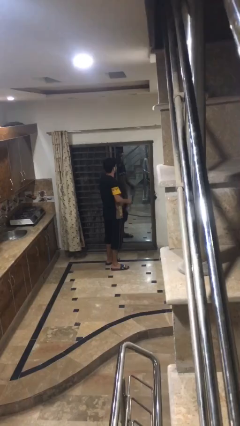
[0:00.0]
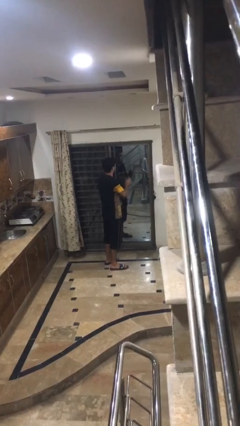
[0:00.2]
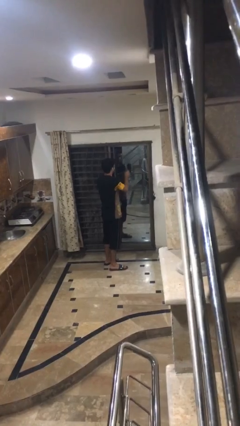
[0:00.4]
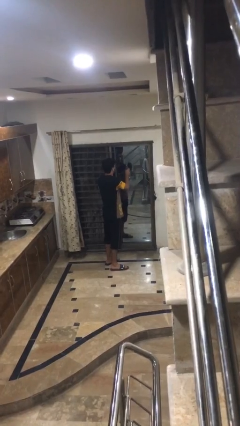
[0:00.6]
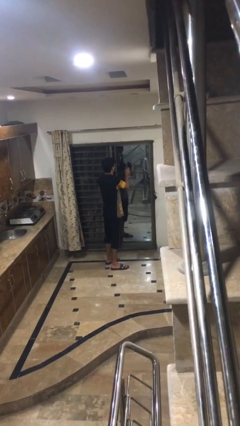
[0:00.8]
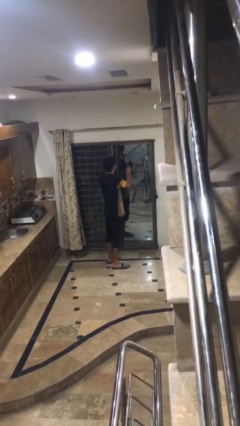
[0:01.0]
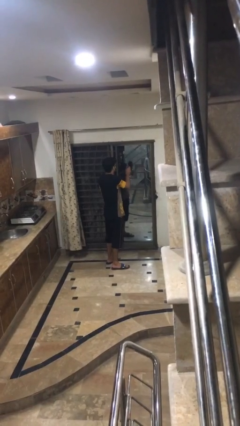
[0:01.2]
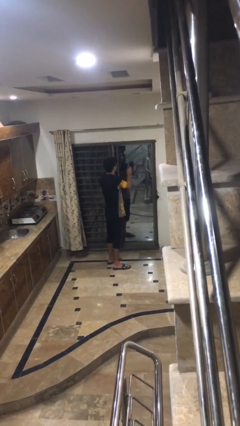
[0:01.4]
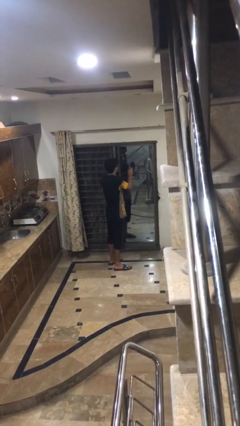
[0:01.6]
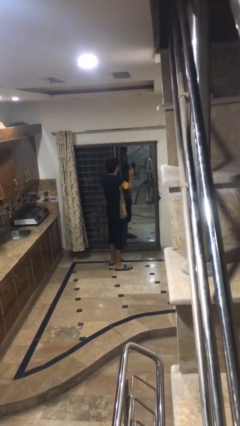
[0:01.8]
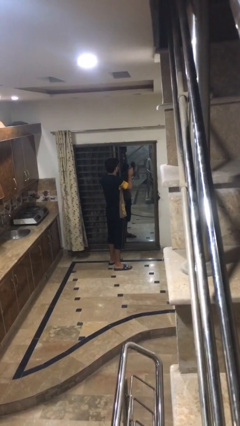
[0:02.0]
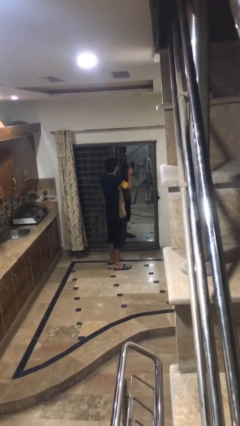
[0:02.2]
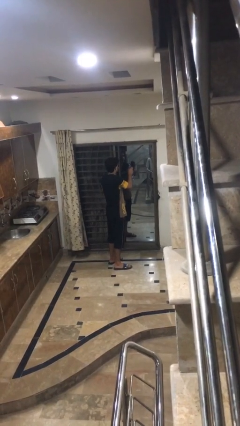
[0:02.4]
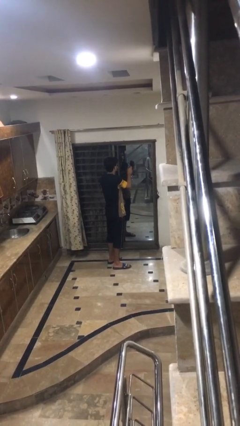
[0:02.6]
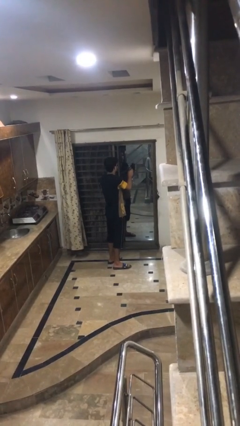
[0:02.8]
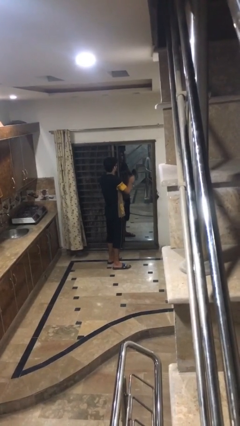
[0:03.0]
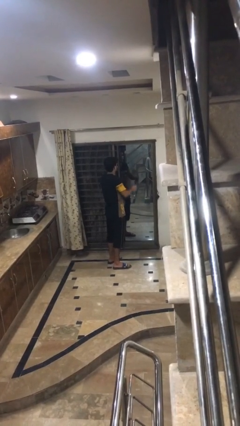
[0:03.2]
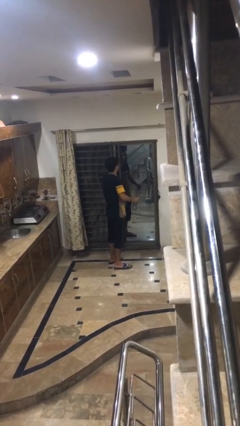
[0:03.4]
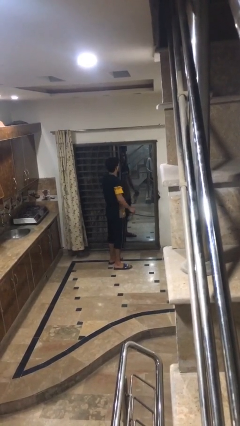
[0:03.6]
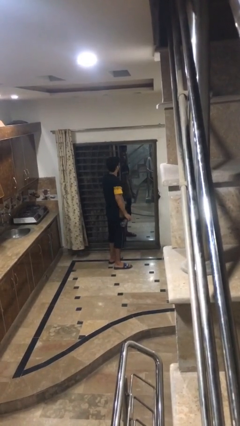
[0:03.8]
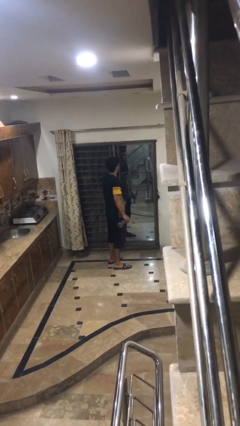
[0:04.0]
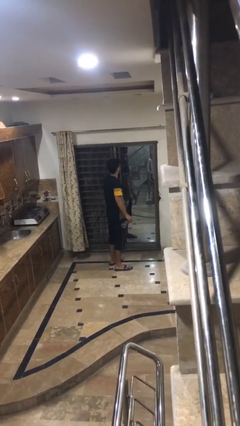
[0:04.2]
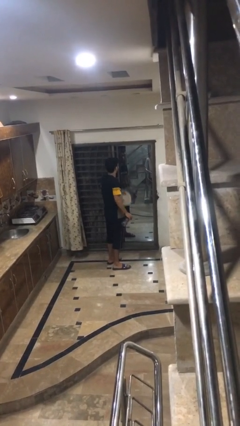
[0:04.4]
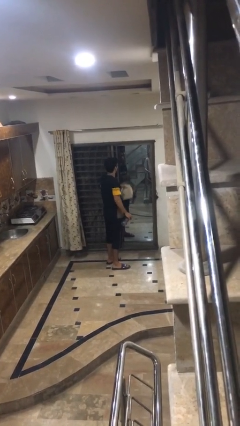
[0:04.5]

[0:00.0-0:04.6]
person sprays from bottle

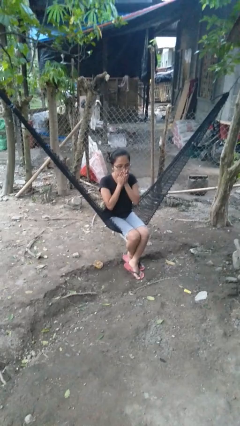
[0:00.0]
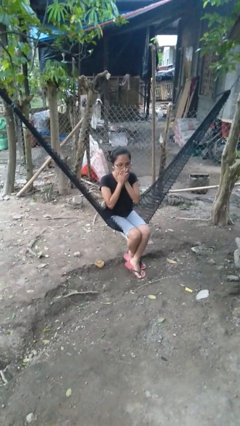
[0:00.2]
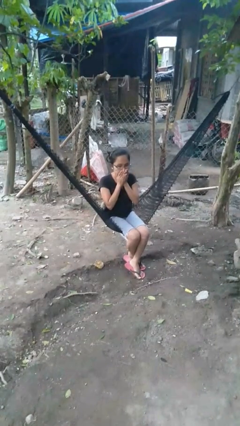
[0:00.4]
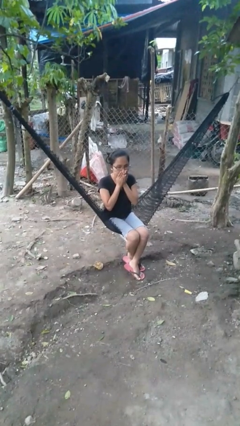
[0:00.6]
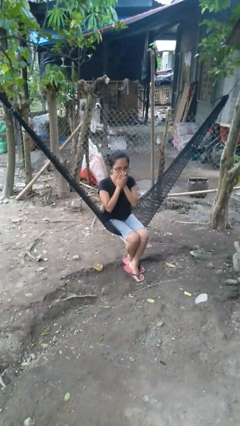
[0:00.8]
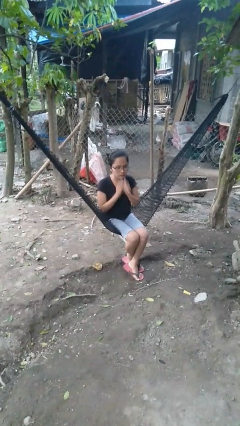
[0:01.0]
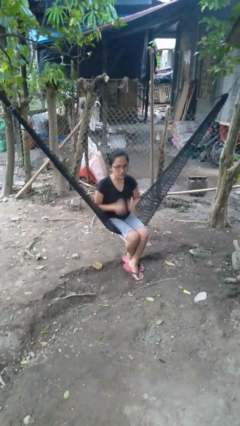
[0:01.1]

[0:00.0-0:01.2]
person blows into hands

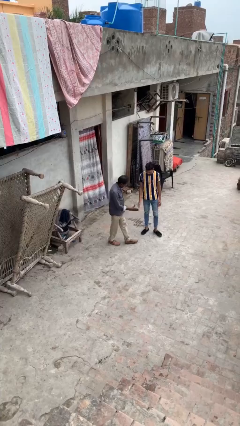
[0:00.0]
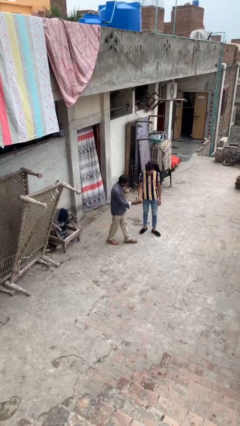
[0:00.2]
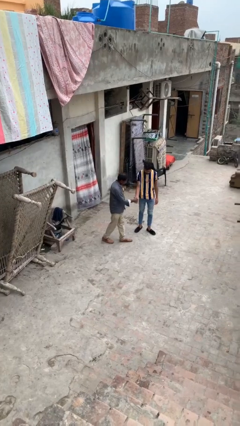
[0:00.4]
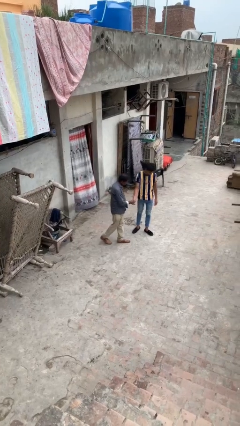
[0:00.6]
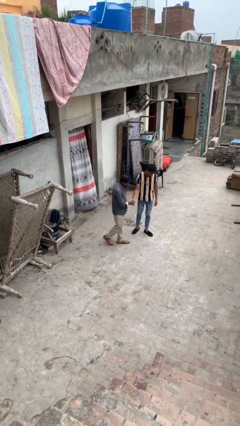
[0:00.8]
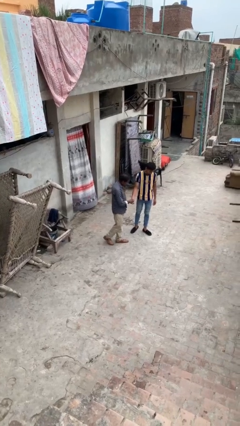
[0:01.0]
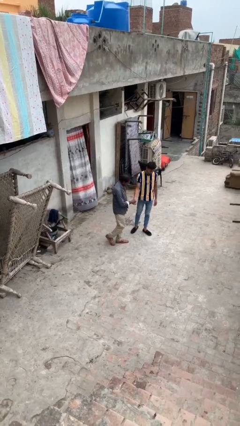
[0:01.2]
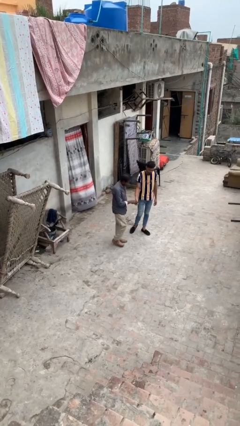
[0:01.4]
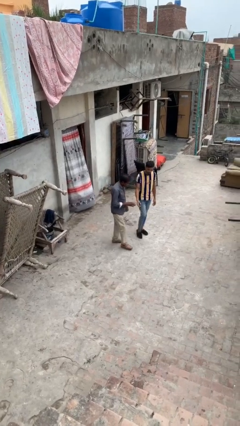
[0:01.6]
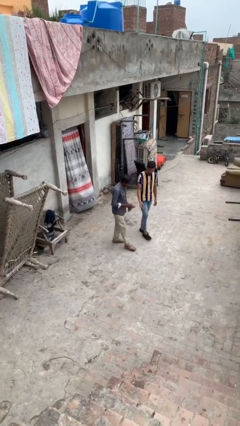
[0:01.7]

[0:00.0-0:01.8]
person shakes hand

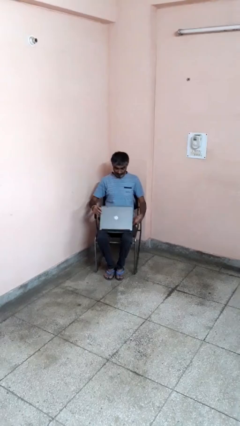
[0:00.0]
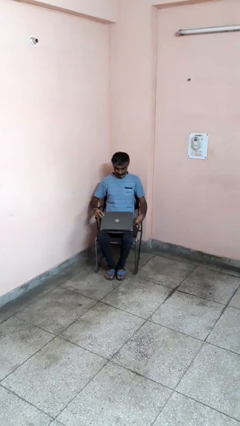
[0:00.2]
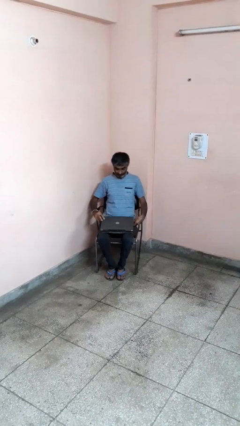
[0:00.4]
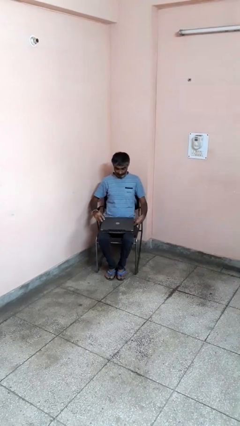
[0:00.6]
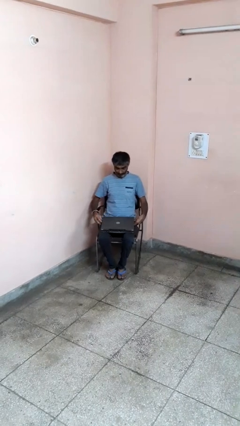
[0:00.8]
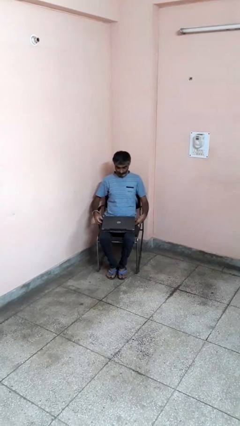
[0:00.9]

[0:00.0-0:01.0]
person closes laptop

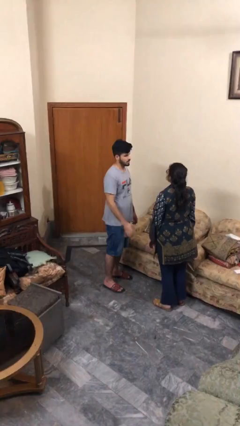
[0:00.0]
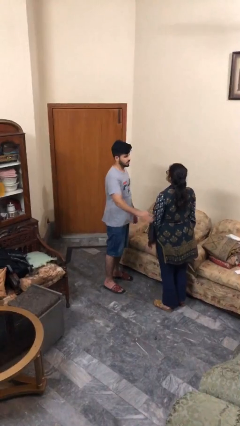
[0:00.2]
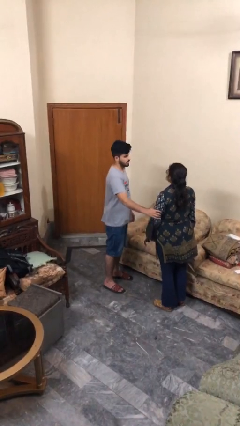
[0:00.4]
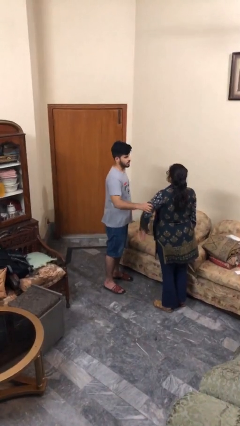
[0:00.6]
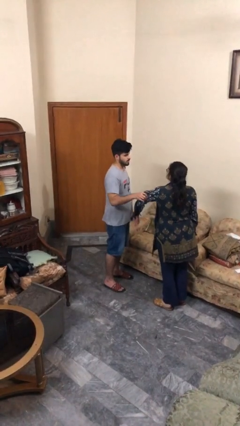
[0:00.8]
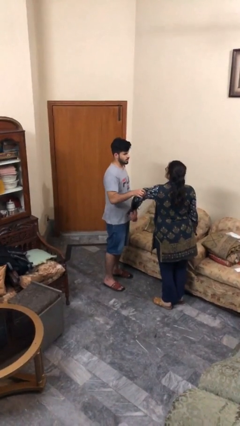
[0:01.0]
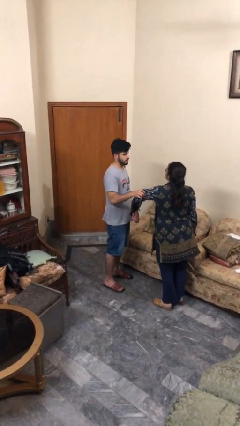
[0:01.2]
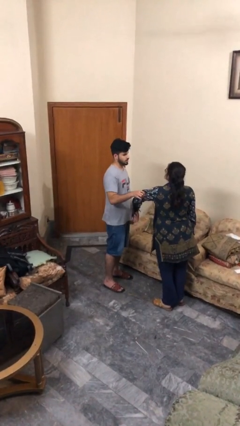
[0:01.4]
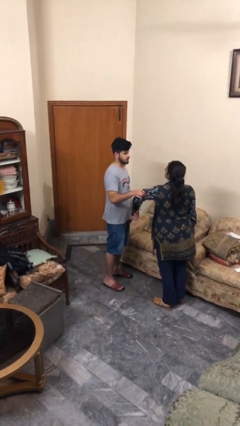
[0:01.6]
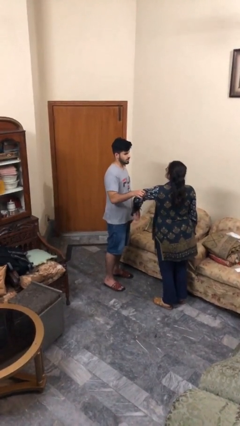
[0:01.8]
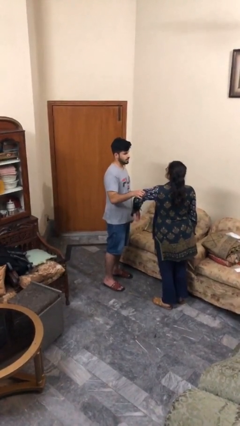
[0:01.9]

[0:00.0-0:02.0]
person grabs person by bicep

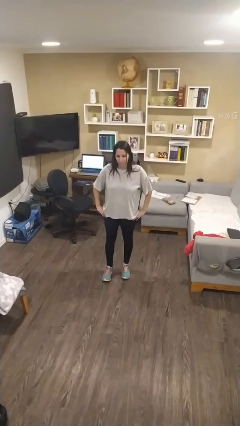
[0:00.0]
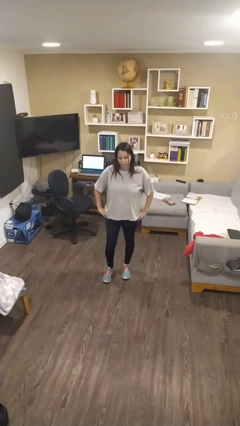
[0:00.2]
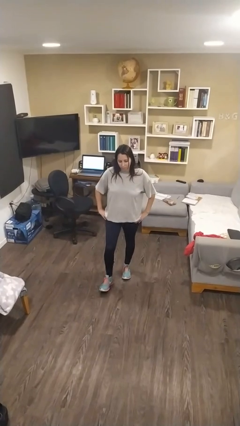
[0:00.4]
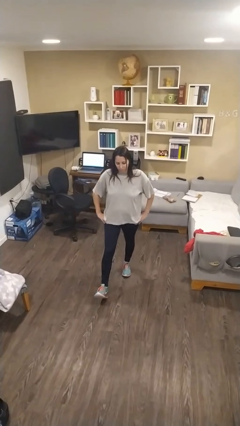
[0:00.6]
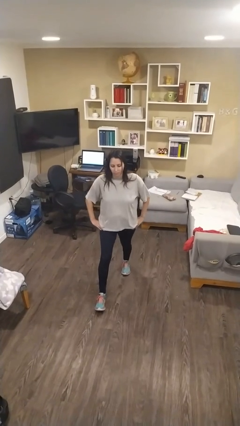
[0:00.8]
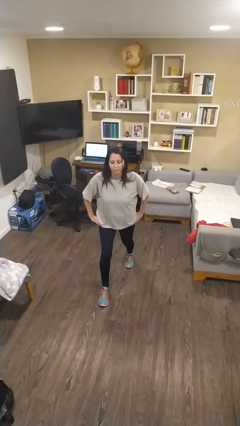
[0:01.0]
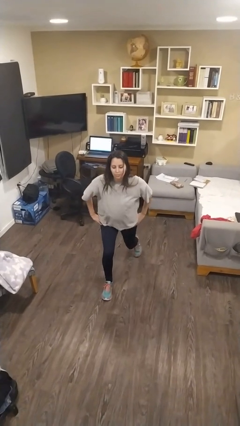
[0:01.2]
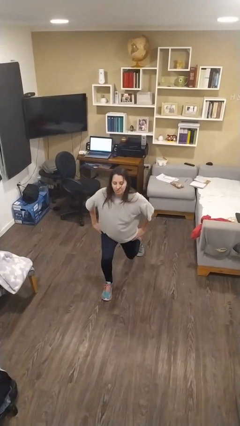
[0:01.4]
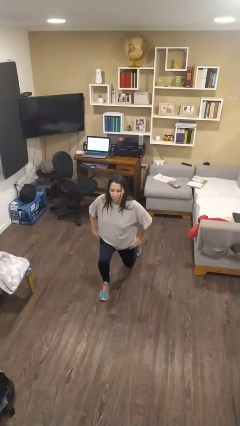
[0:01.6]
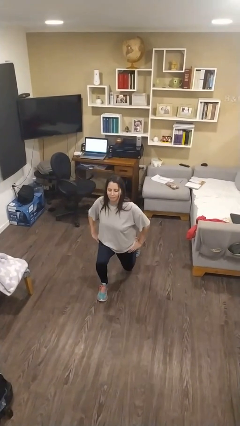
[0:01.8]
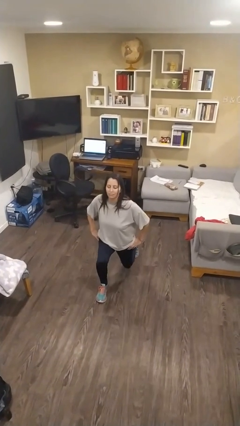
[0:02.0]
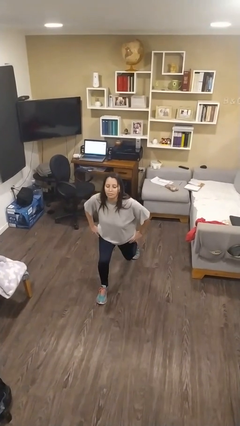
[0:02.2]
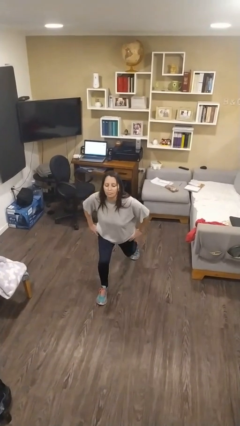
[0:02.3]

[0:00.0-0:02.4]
person exercises with lunges

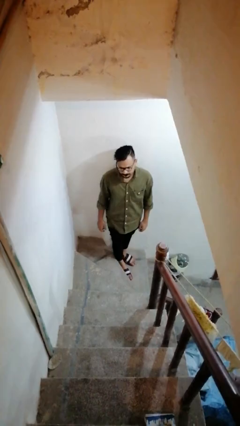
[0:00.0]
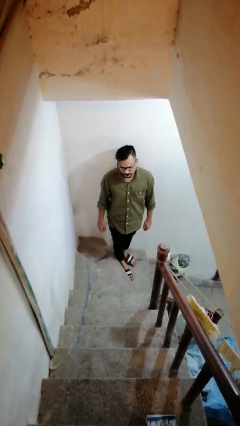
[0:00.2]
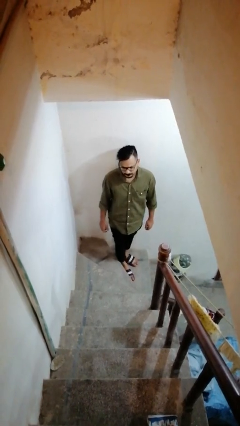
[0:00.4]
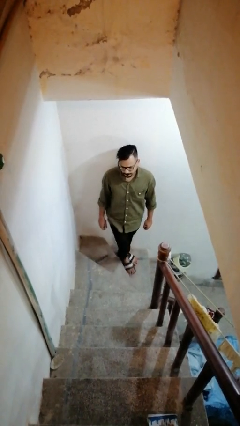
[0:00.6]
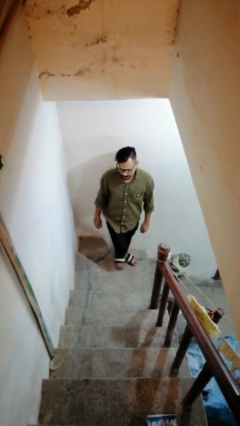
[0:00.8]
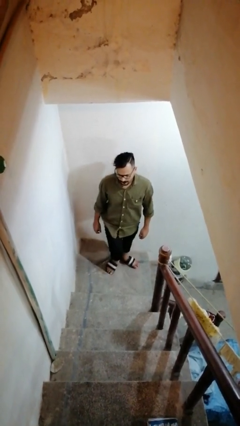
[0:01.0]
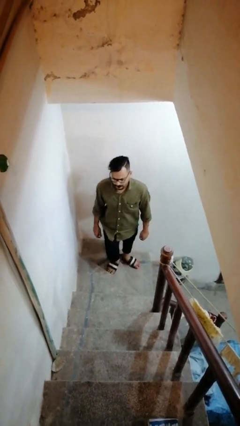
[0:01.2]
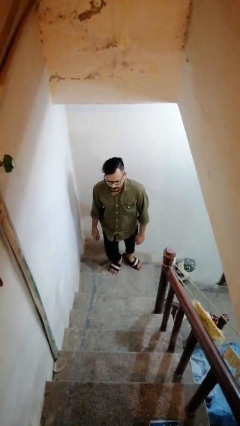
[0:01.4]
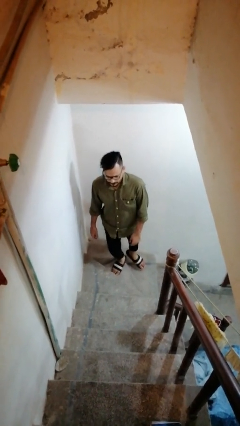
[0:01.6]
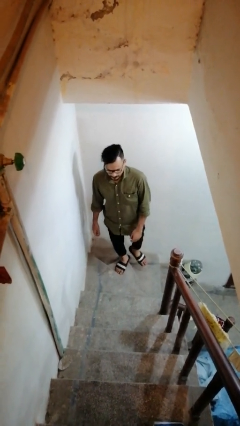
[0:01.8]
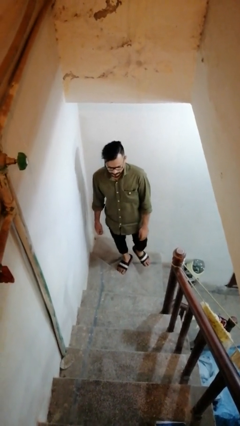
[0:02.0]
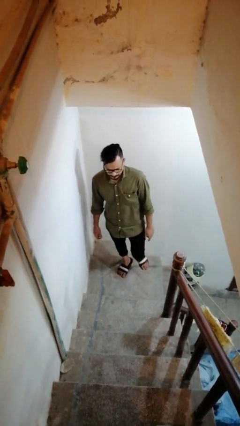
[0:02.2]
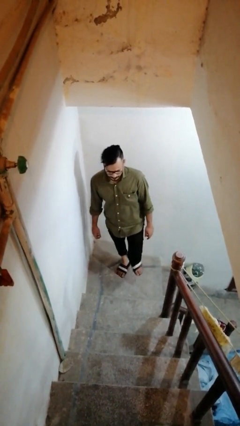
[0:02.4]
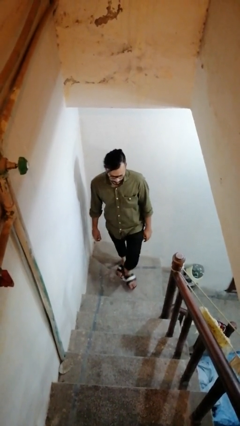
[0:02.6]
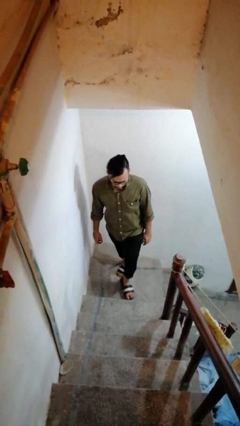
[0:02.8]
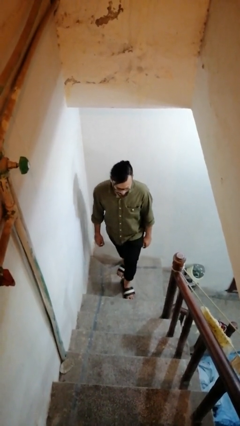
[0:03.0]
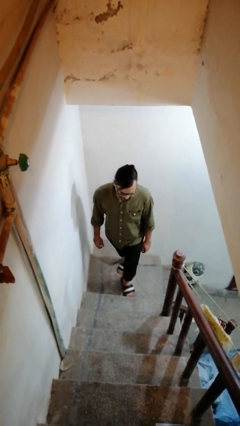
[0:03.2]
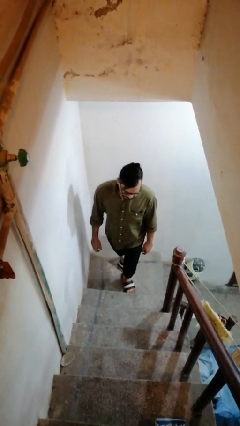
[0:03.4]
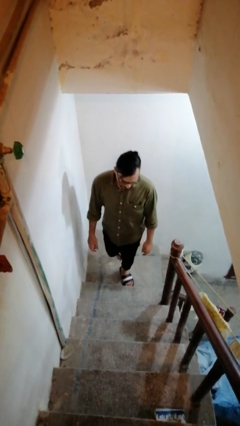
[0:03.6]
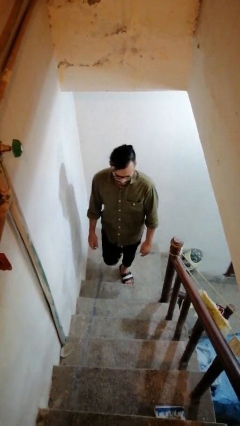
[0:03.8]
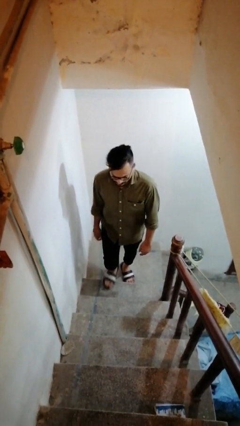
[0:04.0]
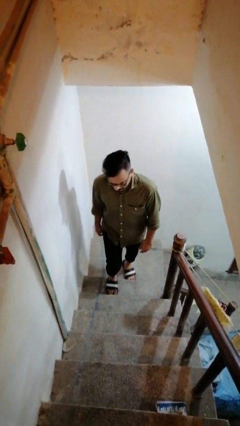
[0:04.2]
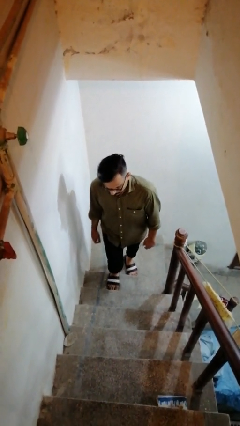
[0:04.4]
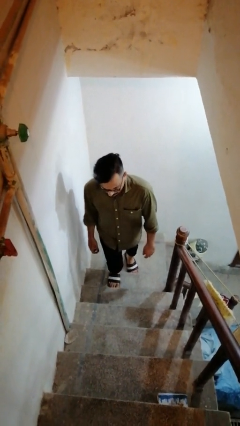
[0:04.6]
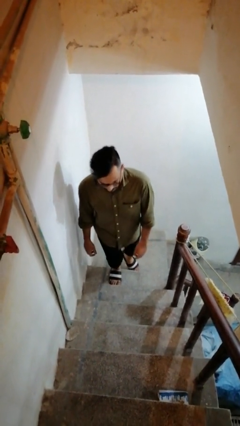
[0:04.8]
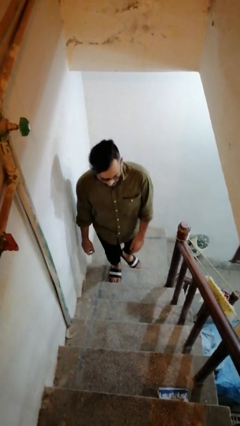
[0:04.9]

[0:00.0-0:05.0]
person climbs up stairs
